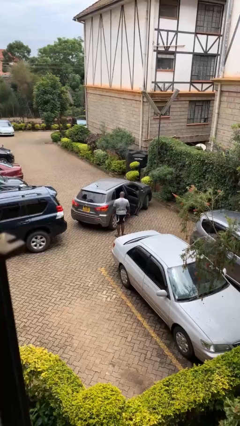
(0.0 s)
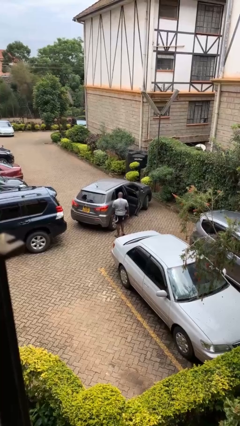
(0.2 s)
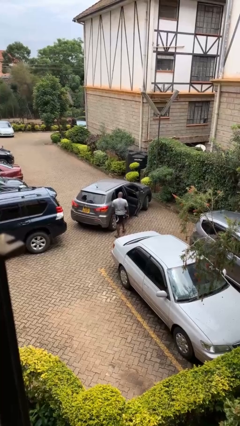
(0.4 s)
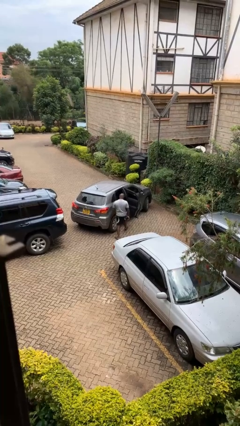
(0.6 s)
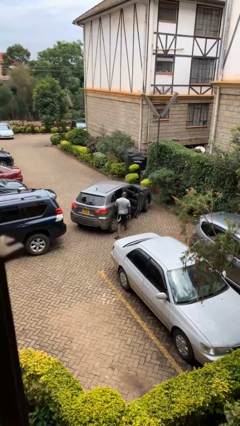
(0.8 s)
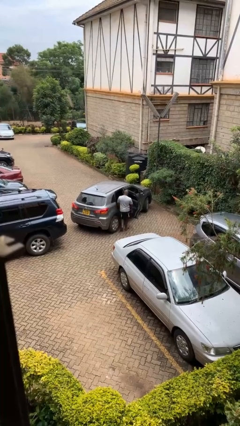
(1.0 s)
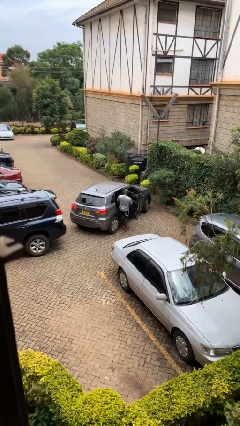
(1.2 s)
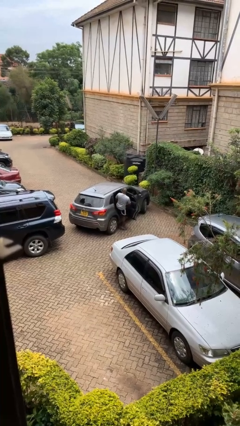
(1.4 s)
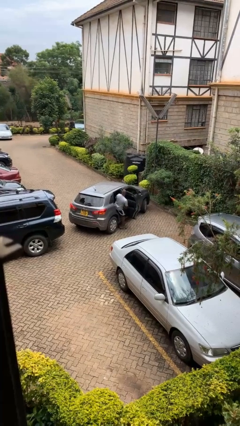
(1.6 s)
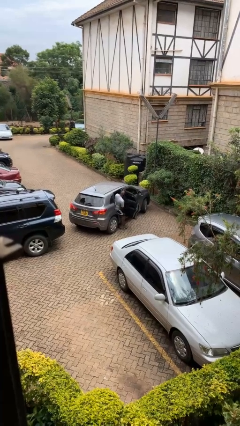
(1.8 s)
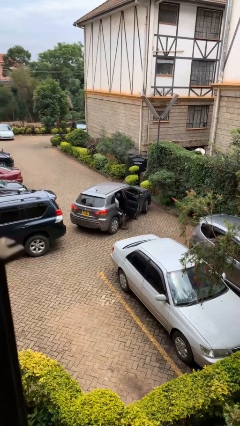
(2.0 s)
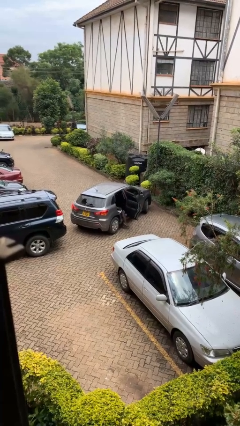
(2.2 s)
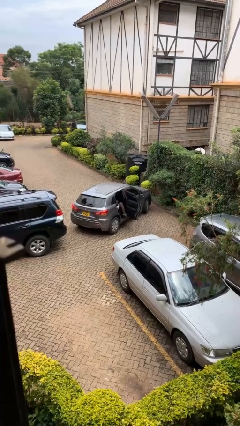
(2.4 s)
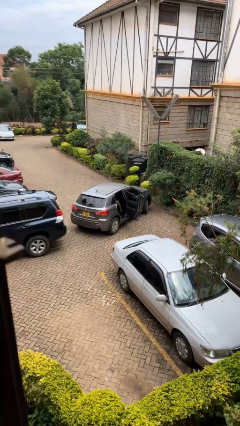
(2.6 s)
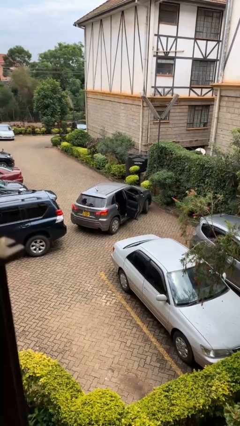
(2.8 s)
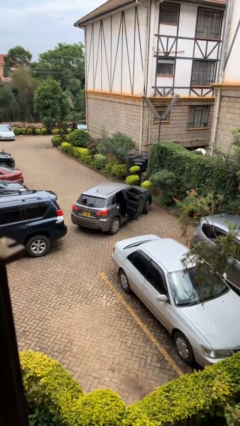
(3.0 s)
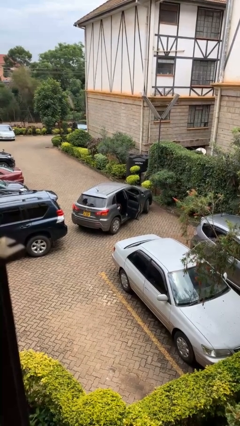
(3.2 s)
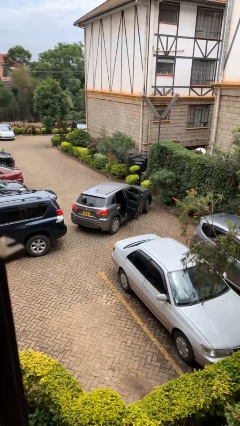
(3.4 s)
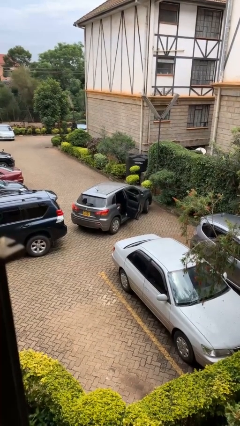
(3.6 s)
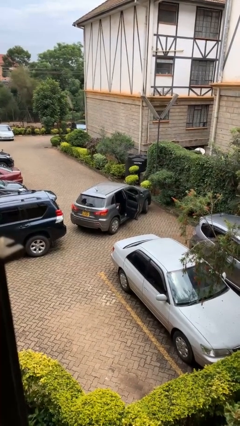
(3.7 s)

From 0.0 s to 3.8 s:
person enters car

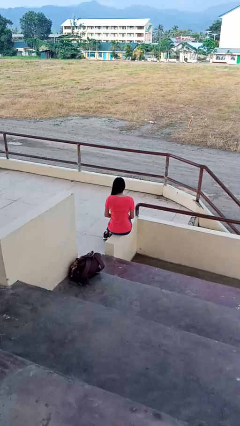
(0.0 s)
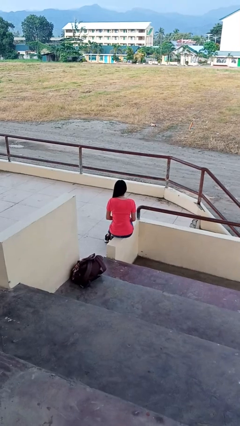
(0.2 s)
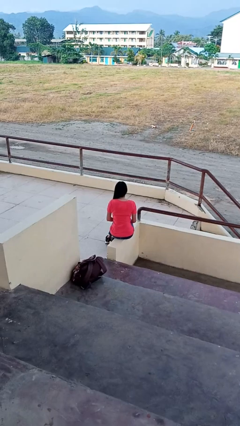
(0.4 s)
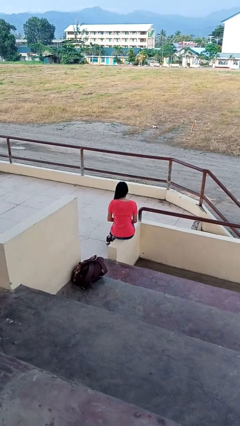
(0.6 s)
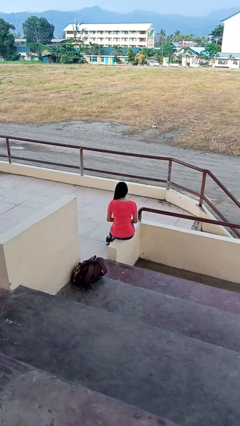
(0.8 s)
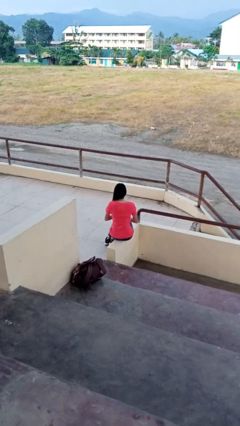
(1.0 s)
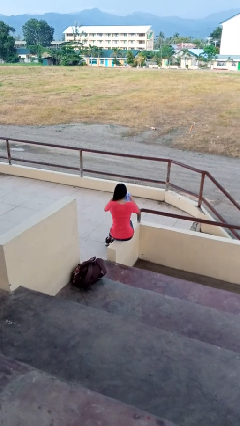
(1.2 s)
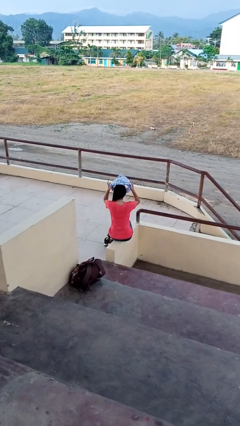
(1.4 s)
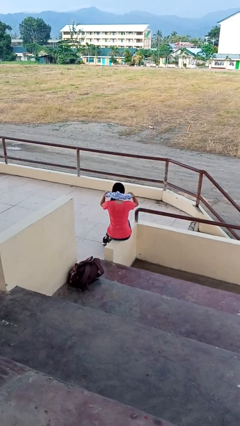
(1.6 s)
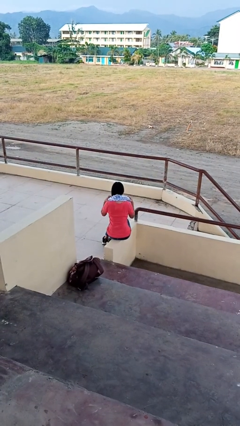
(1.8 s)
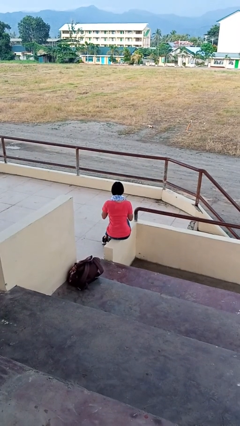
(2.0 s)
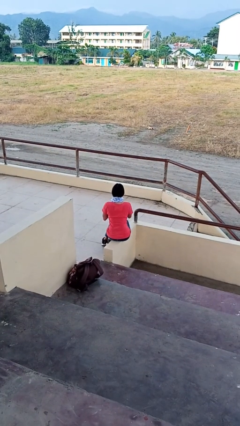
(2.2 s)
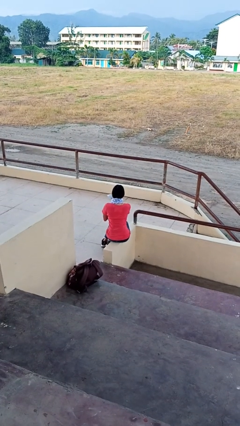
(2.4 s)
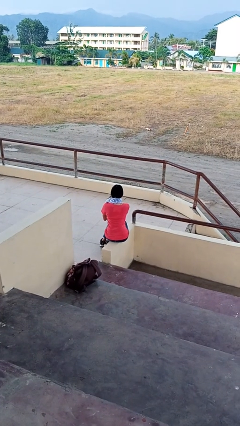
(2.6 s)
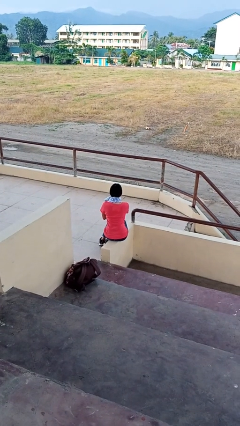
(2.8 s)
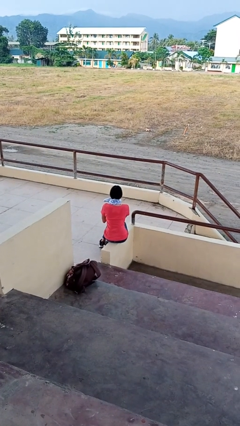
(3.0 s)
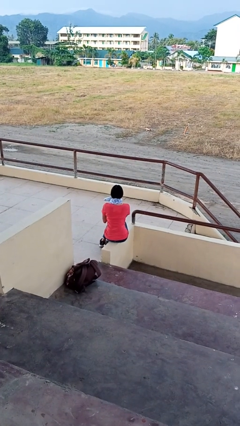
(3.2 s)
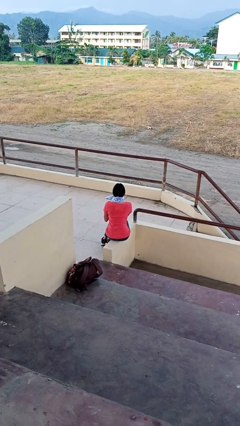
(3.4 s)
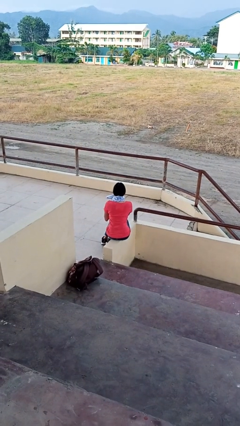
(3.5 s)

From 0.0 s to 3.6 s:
person puts on scarf

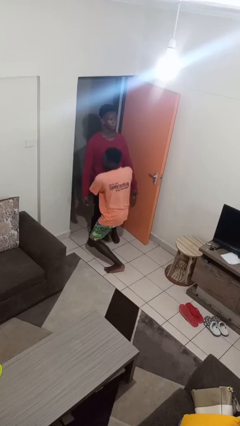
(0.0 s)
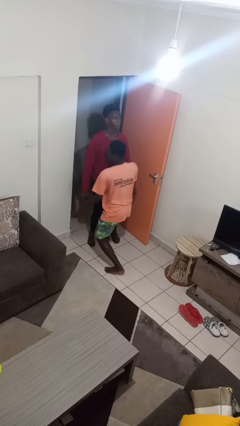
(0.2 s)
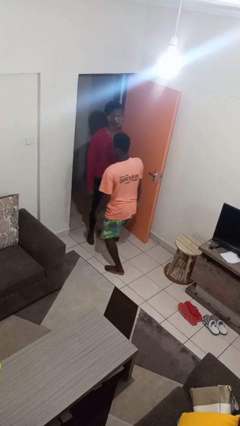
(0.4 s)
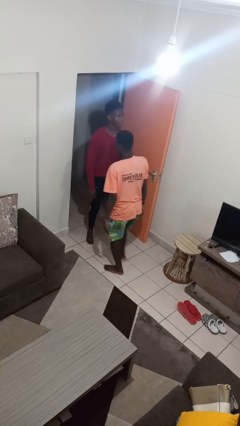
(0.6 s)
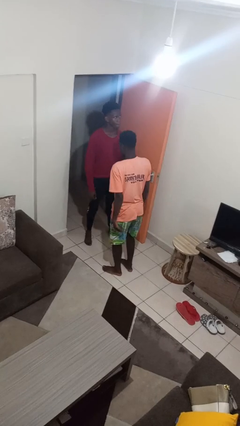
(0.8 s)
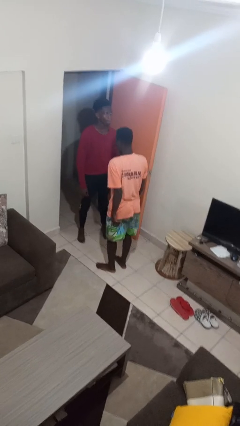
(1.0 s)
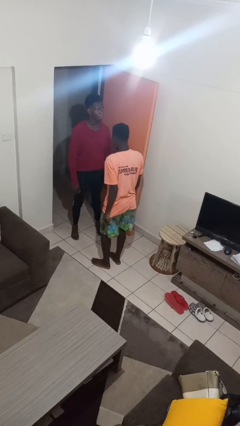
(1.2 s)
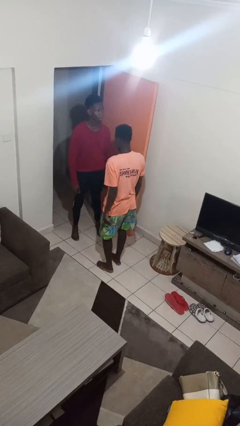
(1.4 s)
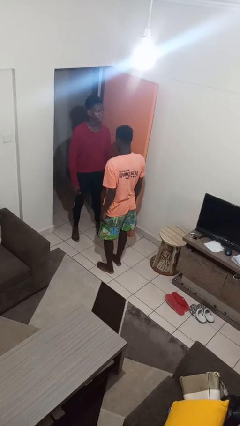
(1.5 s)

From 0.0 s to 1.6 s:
person puts down person

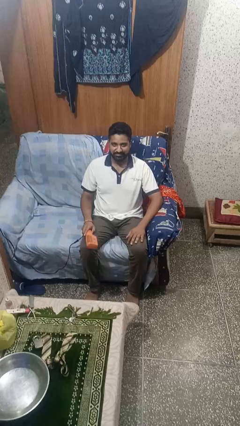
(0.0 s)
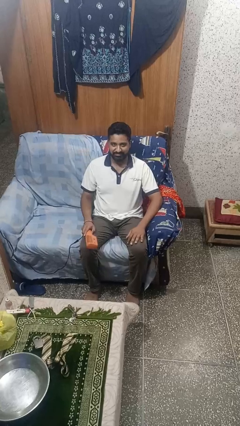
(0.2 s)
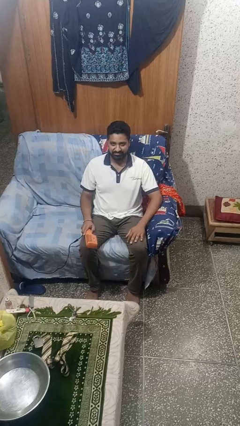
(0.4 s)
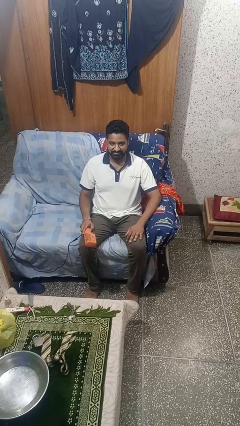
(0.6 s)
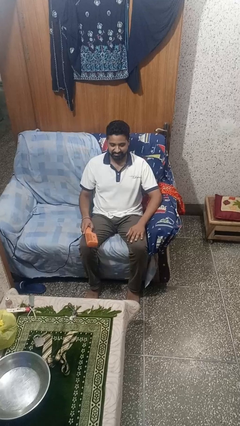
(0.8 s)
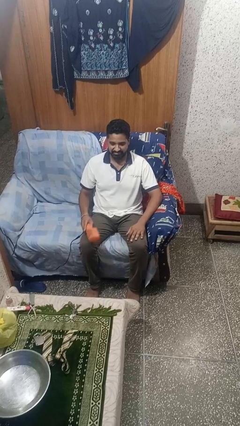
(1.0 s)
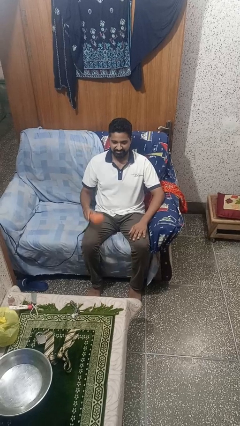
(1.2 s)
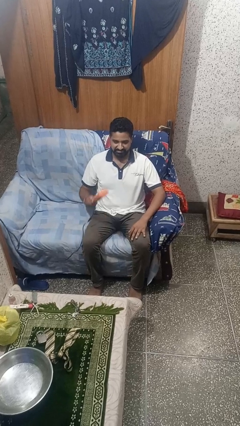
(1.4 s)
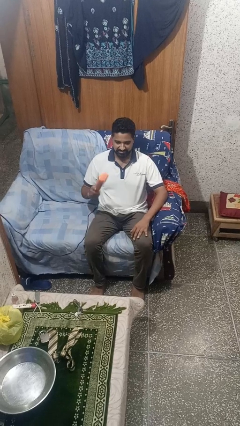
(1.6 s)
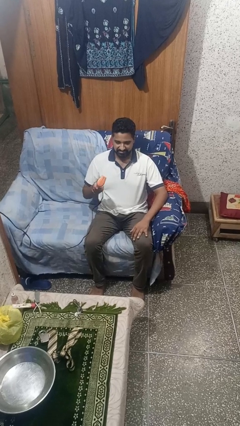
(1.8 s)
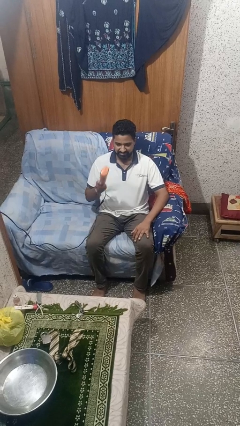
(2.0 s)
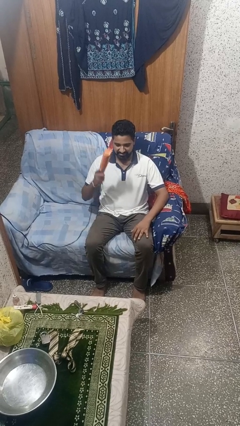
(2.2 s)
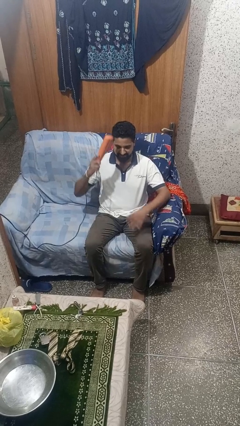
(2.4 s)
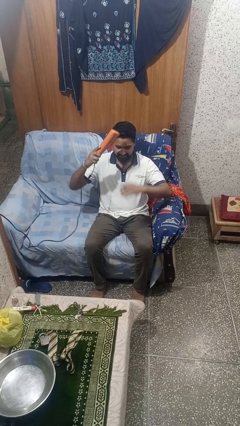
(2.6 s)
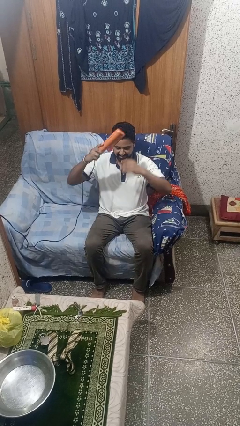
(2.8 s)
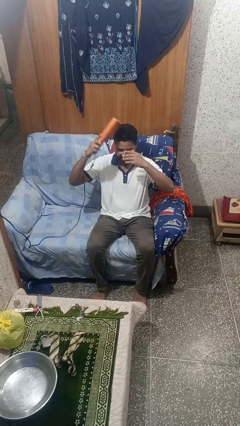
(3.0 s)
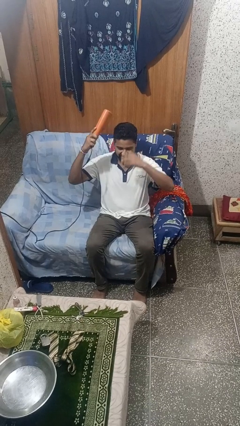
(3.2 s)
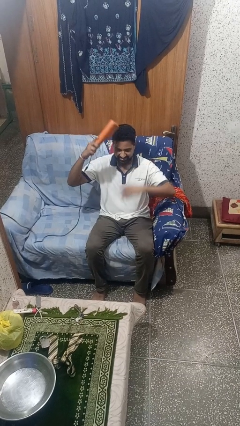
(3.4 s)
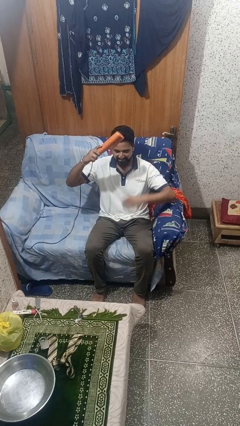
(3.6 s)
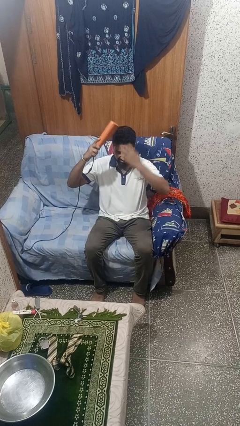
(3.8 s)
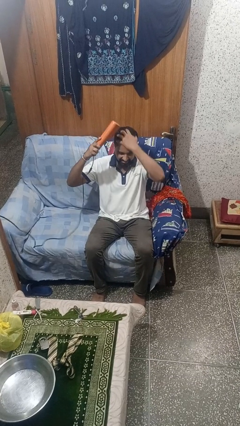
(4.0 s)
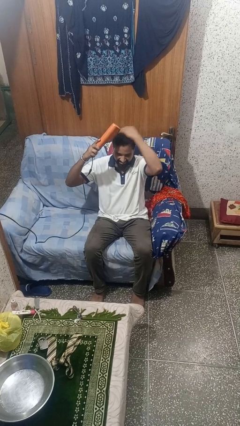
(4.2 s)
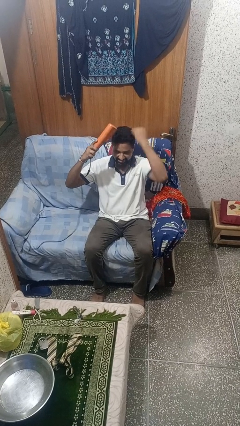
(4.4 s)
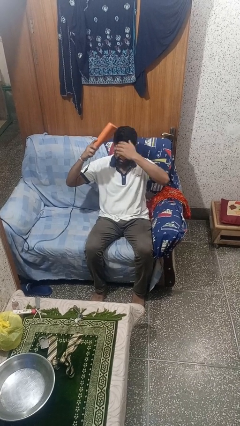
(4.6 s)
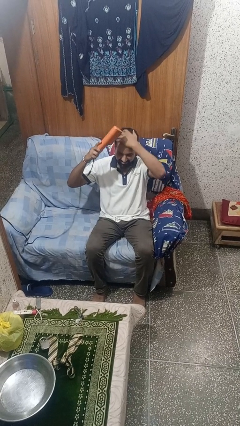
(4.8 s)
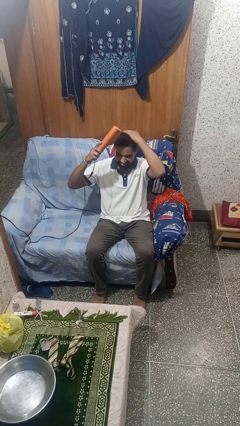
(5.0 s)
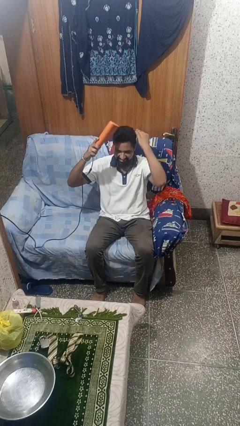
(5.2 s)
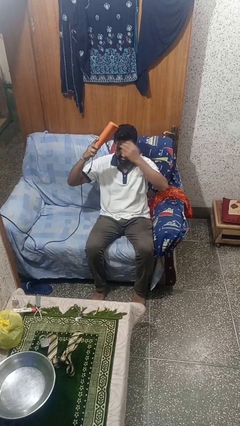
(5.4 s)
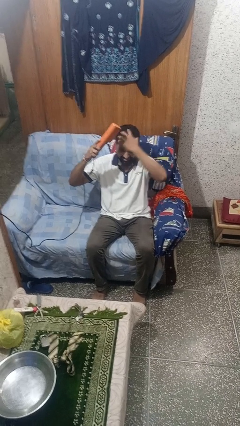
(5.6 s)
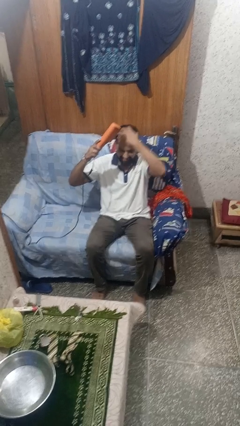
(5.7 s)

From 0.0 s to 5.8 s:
person dries hair with hairdryer

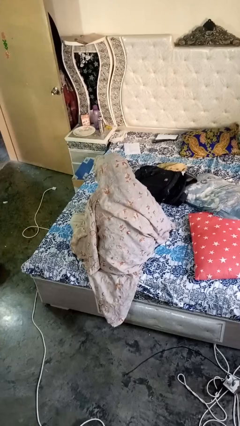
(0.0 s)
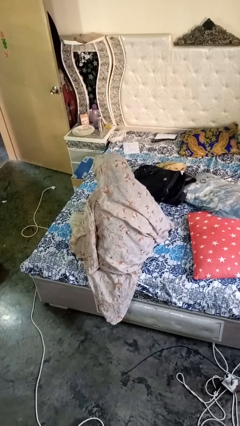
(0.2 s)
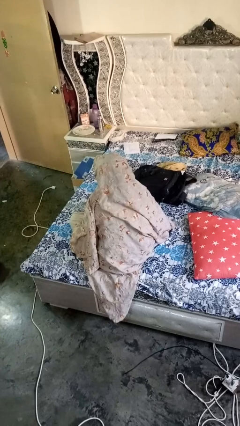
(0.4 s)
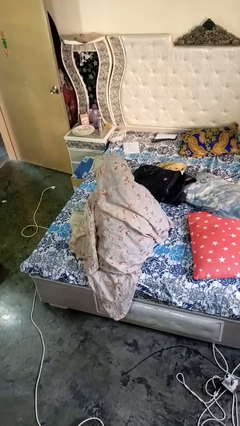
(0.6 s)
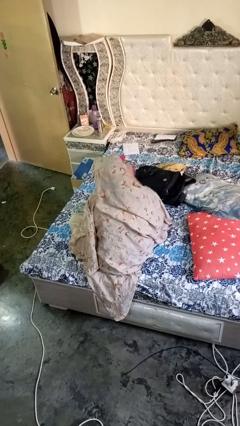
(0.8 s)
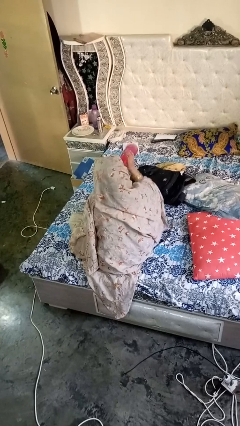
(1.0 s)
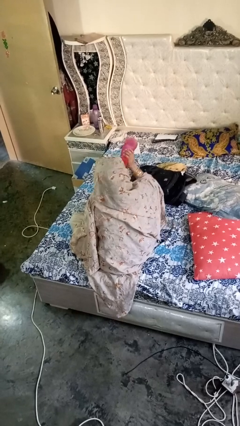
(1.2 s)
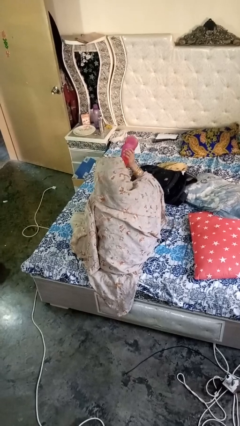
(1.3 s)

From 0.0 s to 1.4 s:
person drinks from bottle

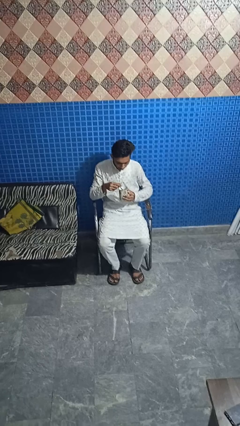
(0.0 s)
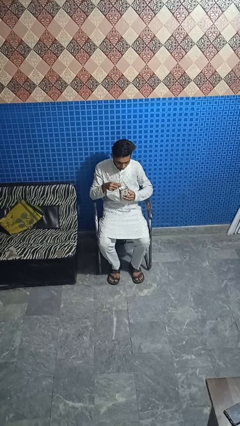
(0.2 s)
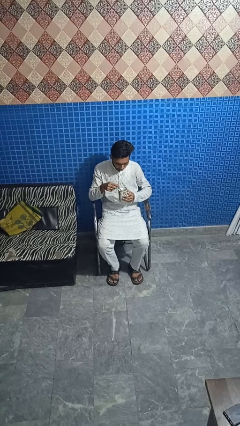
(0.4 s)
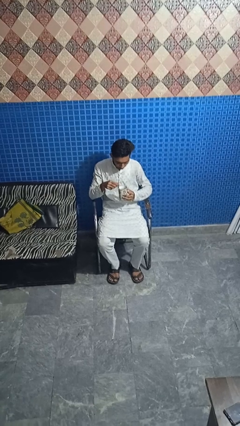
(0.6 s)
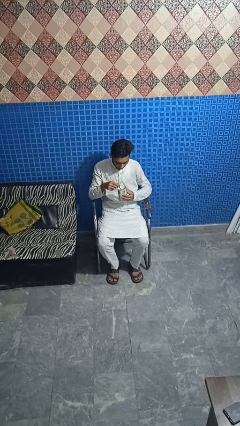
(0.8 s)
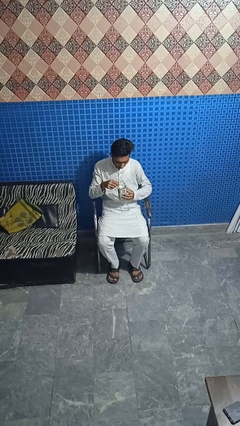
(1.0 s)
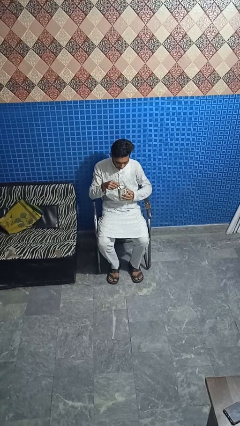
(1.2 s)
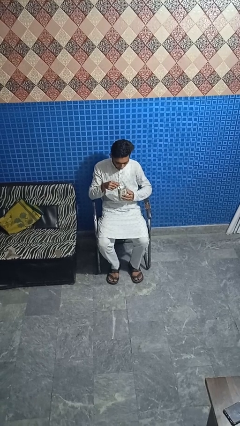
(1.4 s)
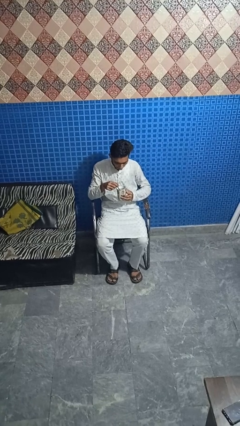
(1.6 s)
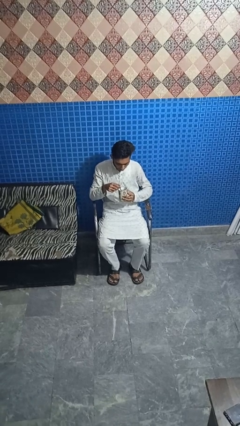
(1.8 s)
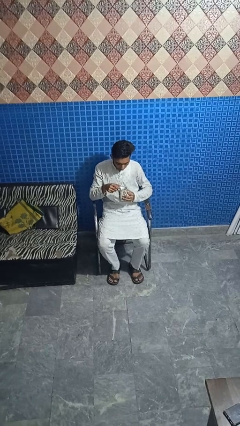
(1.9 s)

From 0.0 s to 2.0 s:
person stirs mug
